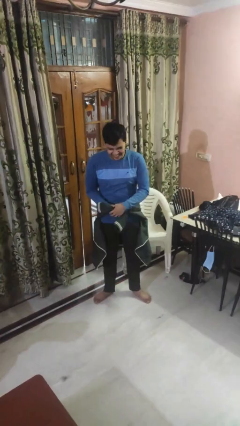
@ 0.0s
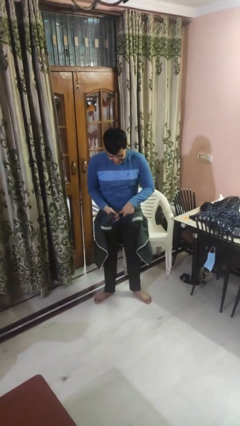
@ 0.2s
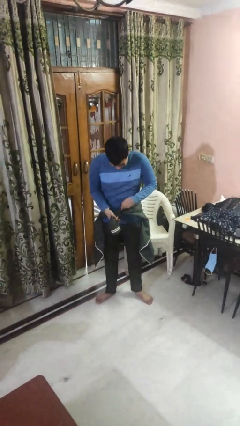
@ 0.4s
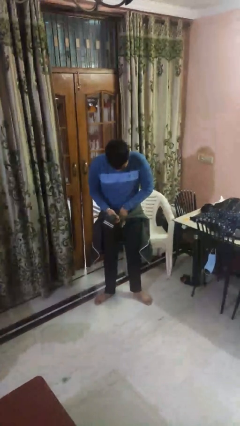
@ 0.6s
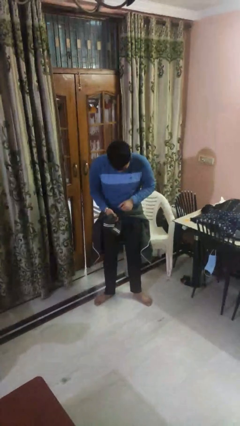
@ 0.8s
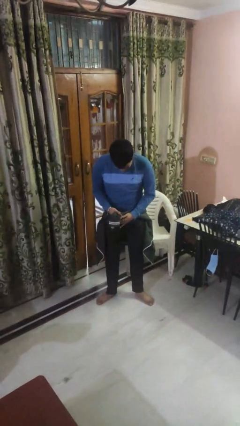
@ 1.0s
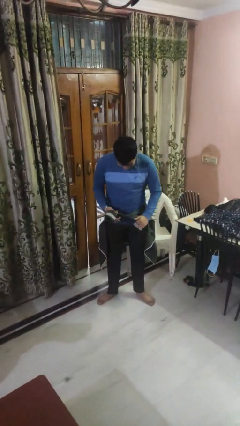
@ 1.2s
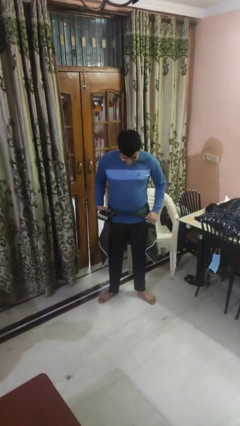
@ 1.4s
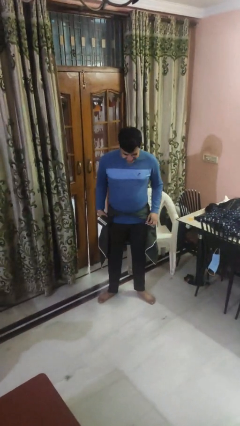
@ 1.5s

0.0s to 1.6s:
person ties jacket around waist

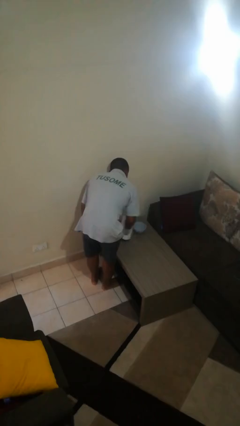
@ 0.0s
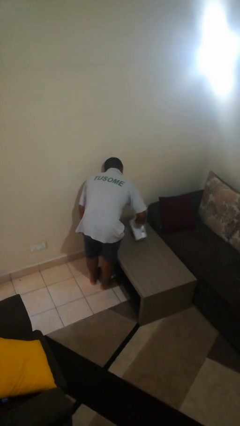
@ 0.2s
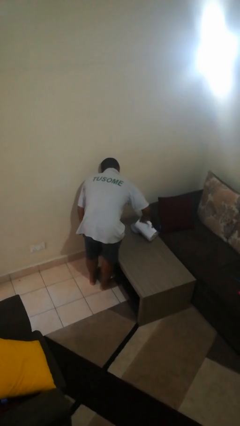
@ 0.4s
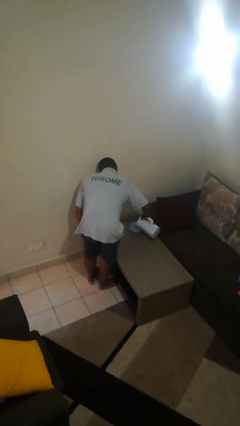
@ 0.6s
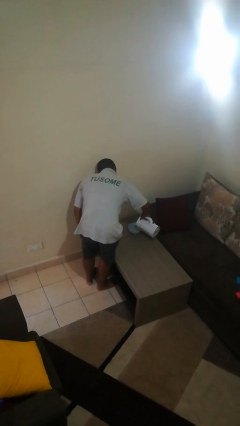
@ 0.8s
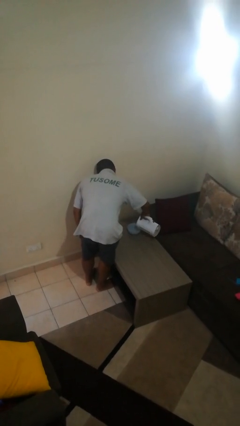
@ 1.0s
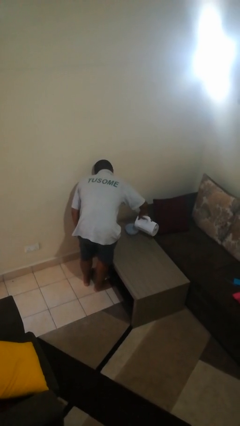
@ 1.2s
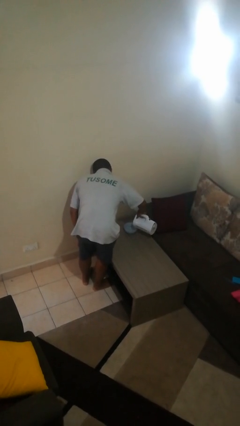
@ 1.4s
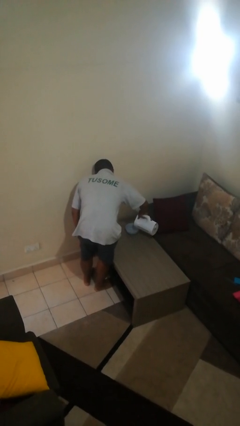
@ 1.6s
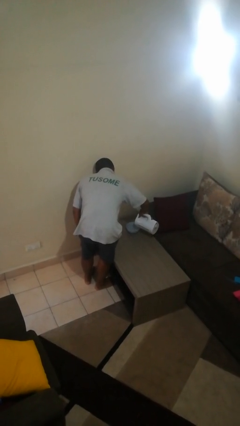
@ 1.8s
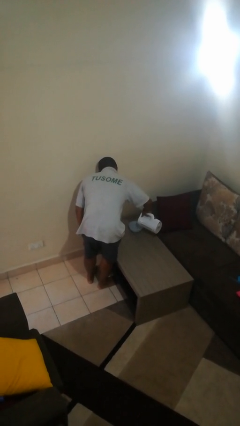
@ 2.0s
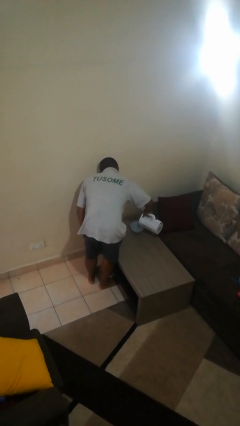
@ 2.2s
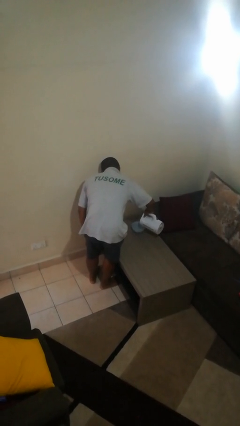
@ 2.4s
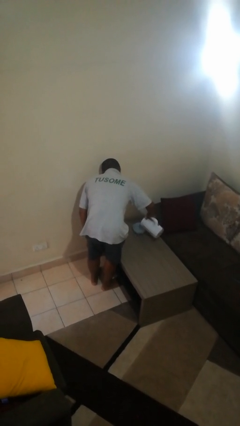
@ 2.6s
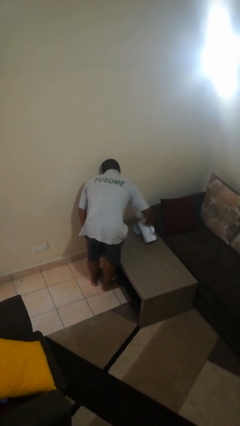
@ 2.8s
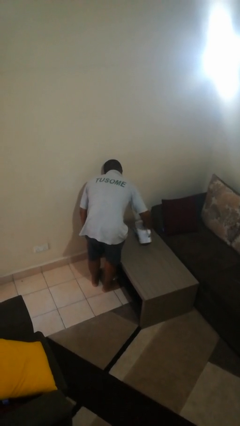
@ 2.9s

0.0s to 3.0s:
person pours into bowl

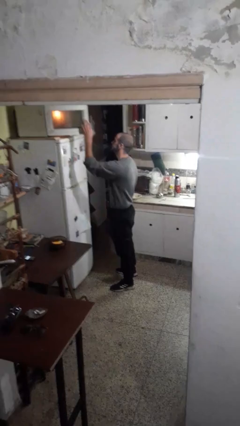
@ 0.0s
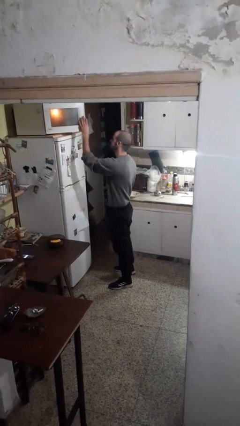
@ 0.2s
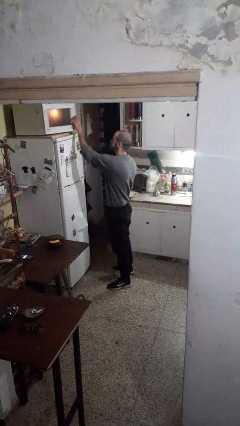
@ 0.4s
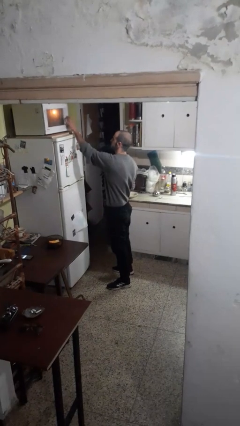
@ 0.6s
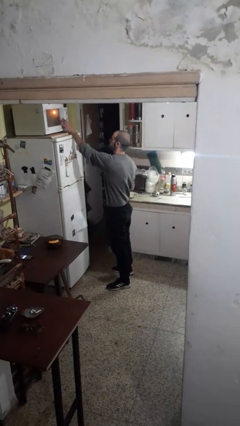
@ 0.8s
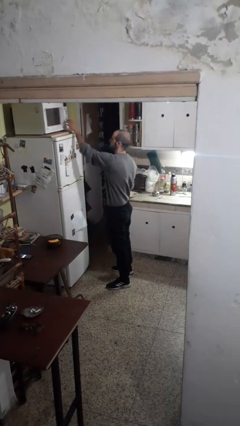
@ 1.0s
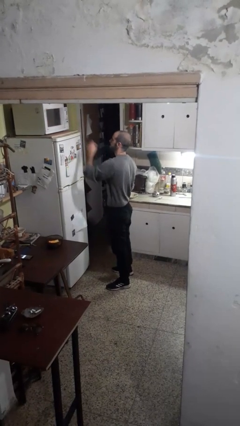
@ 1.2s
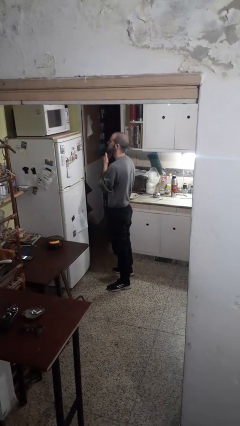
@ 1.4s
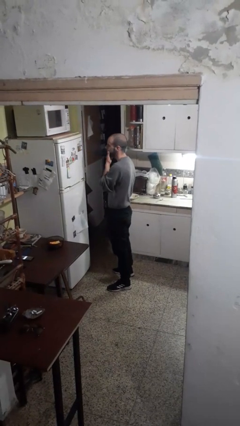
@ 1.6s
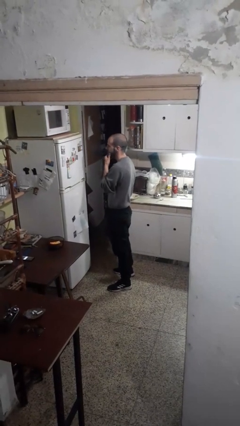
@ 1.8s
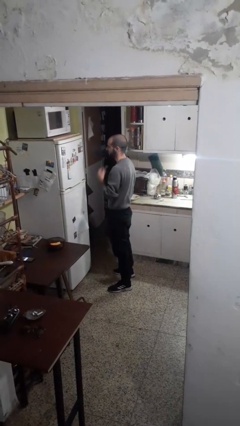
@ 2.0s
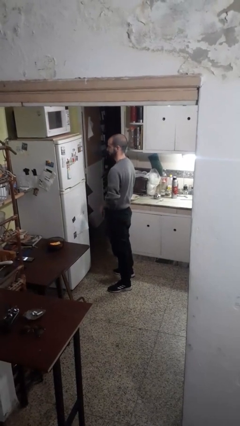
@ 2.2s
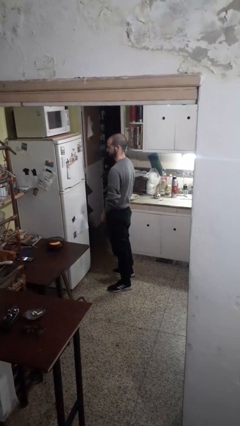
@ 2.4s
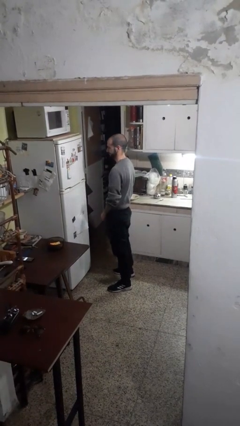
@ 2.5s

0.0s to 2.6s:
person closes microwave

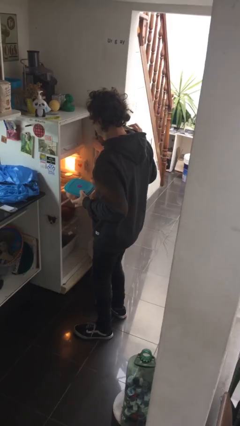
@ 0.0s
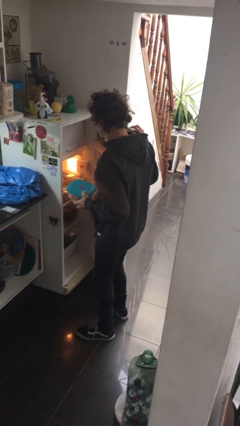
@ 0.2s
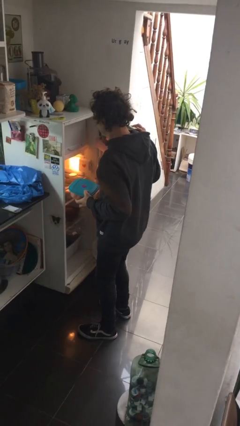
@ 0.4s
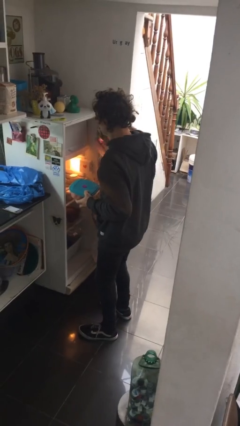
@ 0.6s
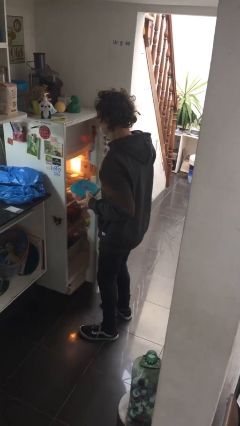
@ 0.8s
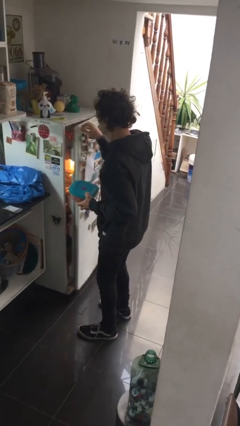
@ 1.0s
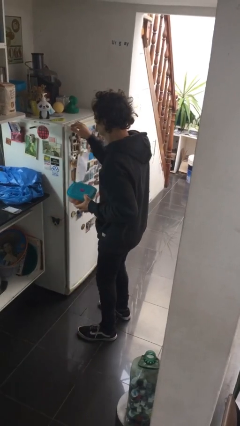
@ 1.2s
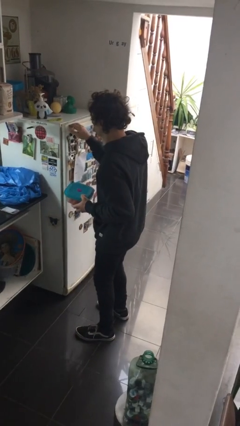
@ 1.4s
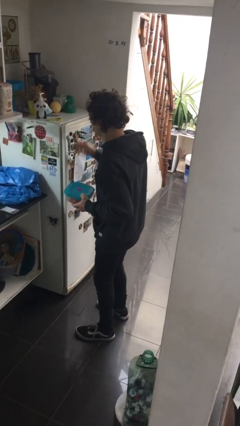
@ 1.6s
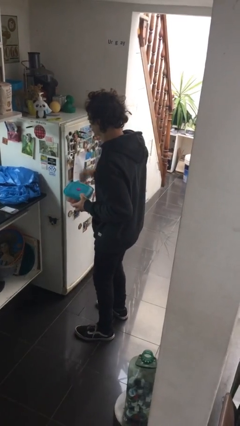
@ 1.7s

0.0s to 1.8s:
person closes refrigerator

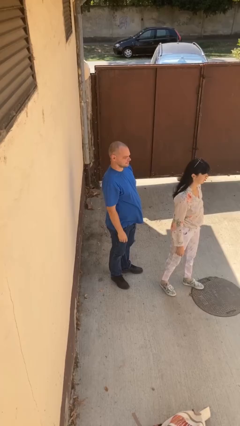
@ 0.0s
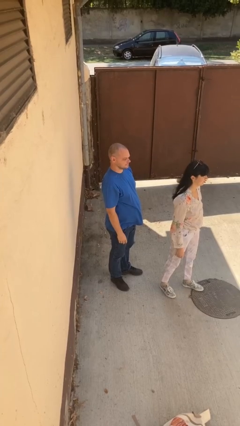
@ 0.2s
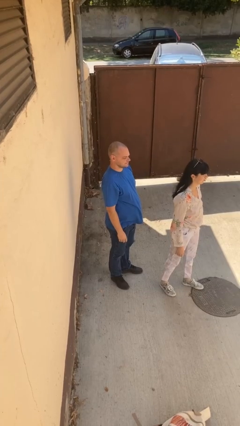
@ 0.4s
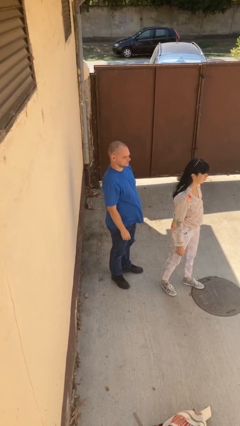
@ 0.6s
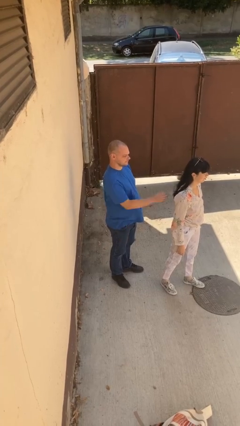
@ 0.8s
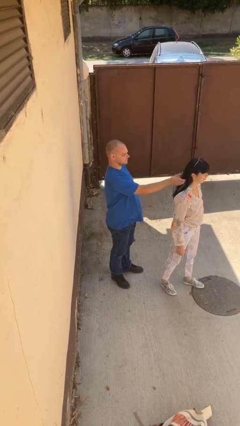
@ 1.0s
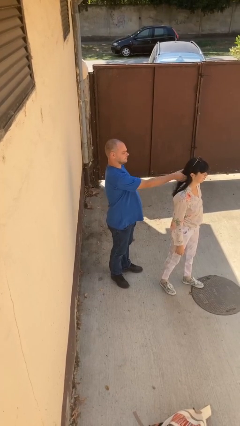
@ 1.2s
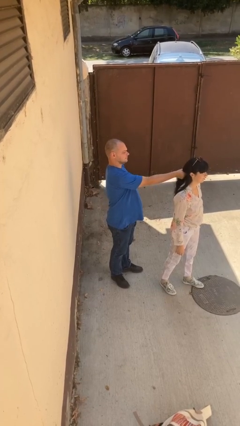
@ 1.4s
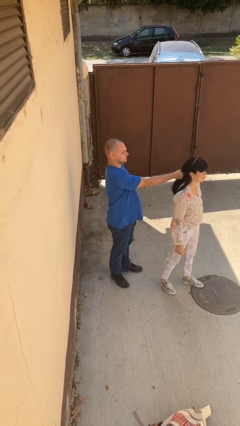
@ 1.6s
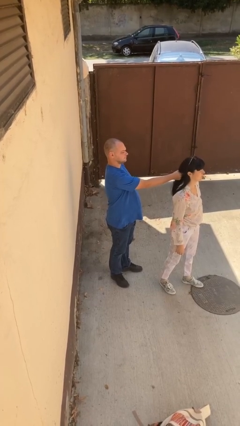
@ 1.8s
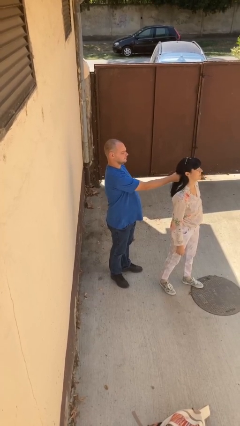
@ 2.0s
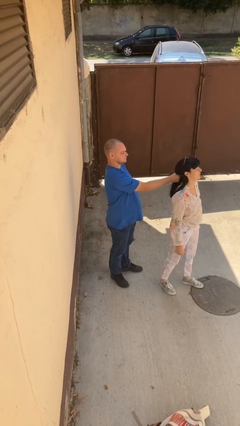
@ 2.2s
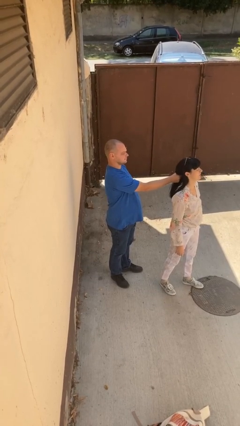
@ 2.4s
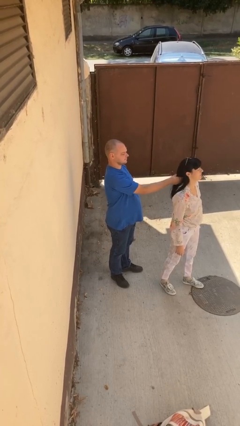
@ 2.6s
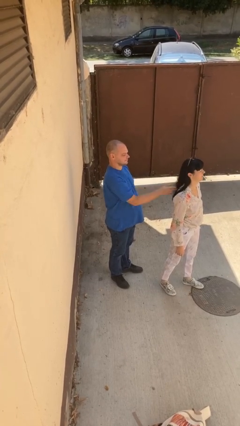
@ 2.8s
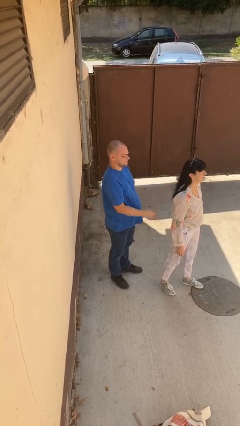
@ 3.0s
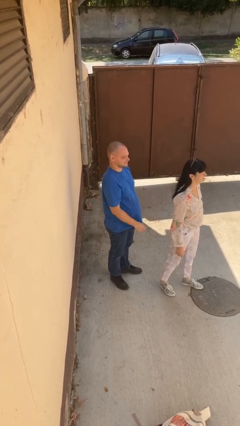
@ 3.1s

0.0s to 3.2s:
person grabs person by hair

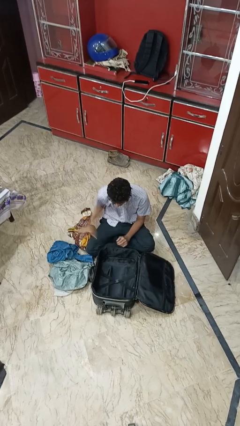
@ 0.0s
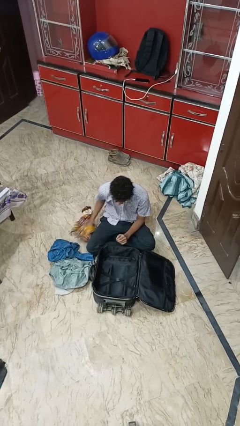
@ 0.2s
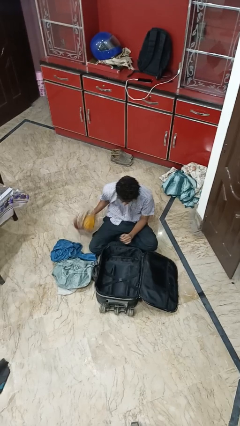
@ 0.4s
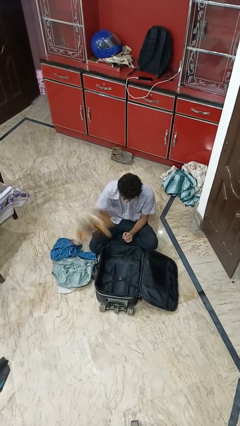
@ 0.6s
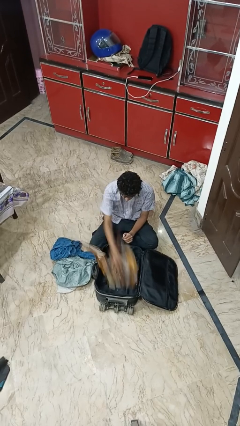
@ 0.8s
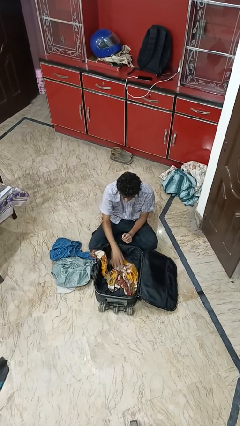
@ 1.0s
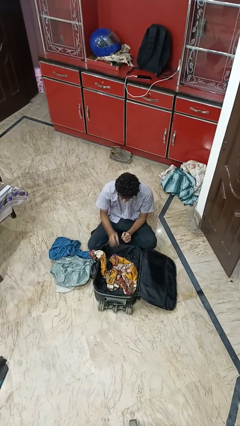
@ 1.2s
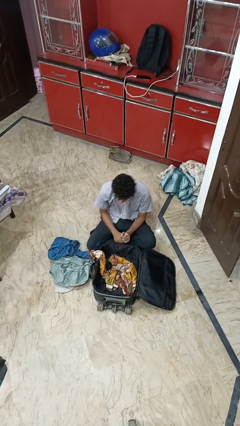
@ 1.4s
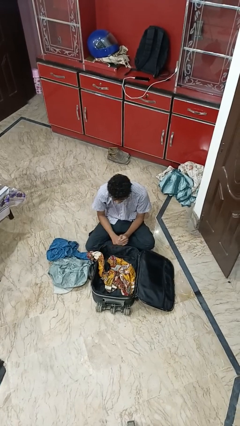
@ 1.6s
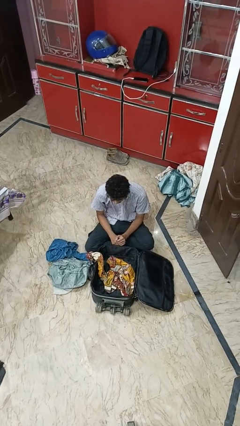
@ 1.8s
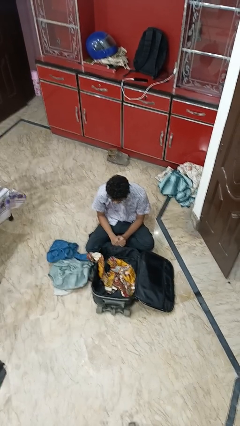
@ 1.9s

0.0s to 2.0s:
person loads clothes into suitcase

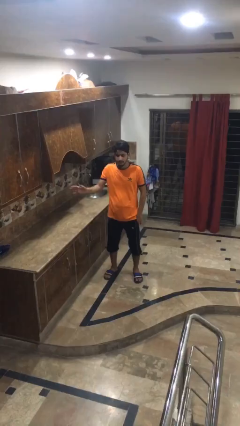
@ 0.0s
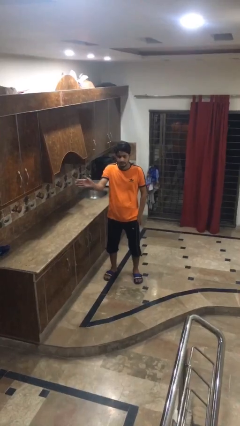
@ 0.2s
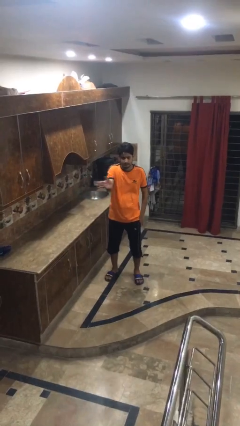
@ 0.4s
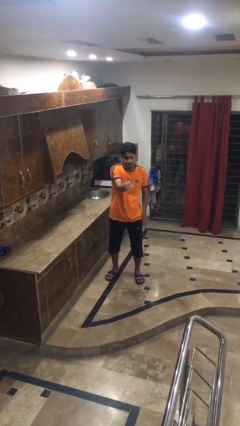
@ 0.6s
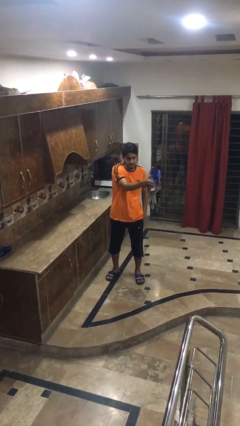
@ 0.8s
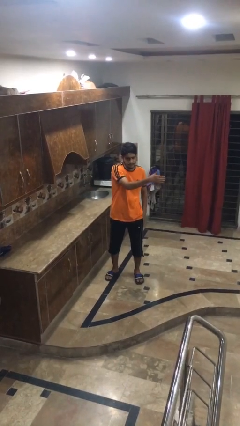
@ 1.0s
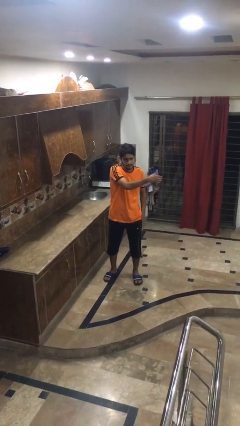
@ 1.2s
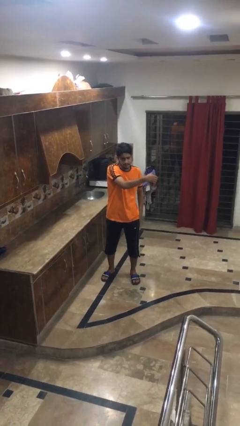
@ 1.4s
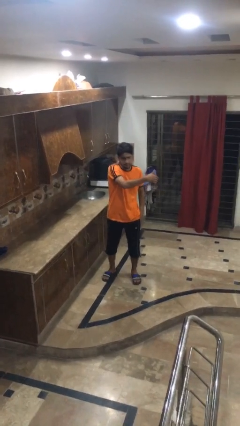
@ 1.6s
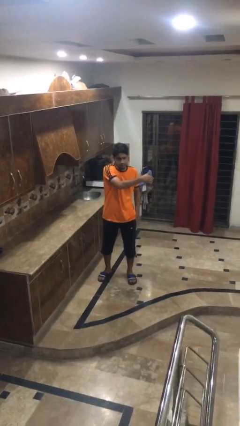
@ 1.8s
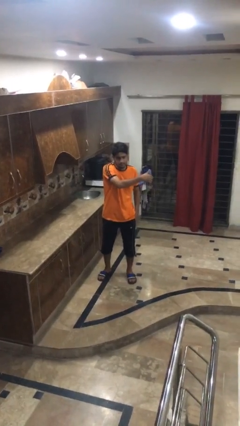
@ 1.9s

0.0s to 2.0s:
person gestures swipe left

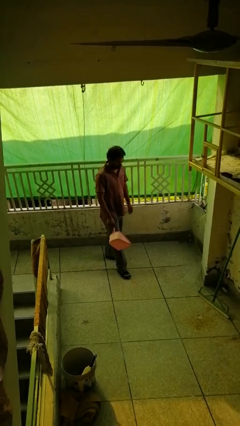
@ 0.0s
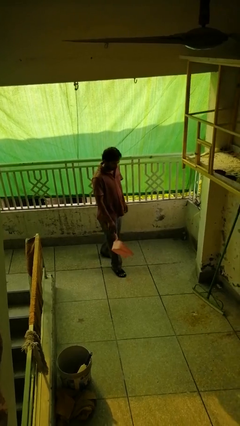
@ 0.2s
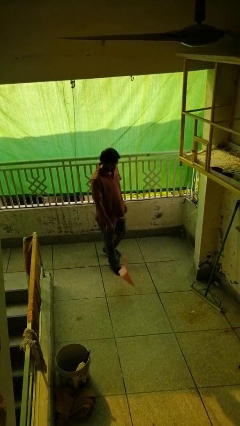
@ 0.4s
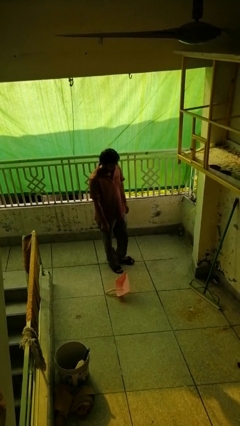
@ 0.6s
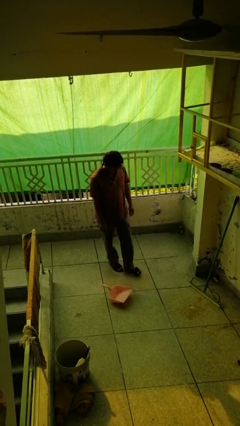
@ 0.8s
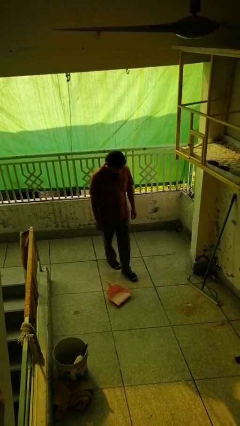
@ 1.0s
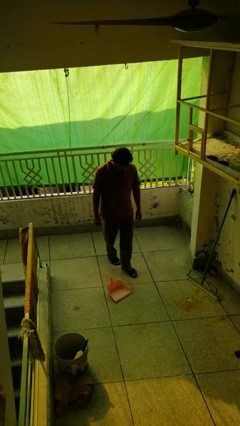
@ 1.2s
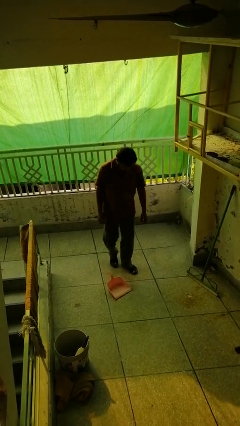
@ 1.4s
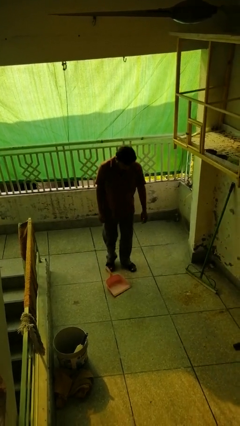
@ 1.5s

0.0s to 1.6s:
person drops object
